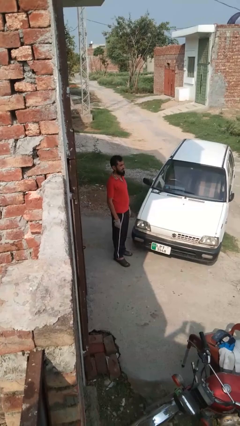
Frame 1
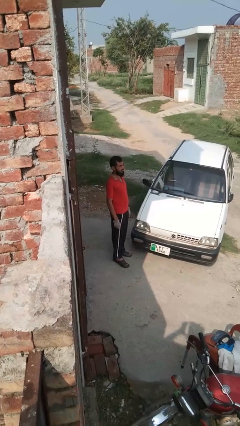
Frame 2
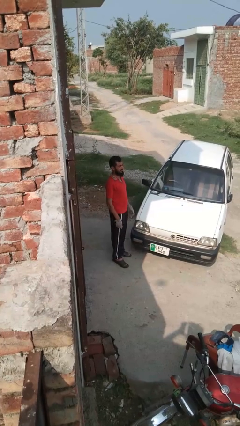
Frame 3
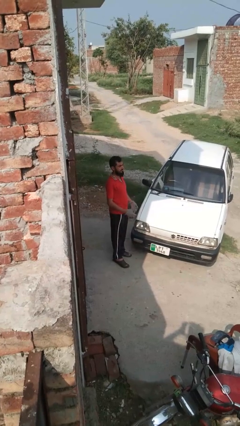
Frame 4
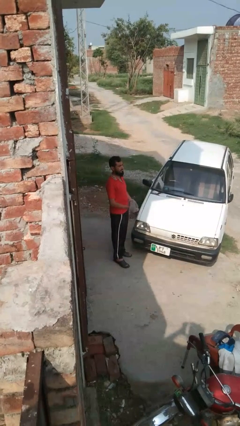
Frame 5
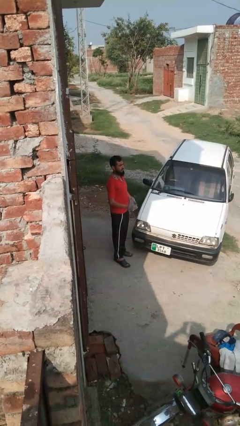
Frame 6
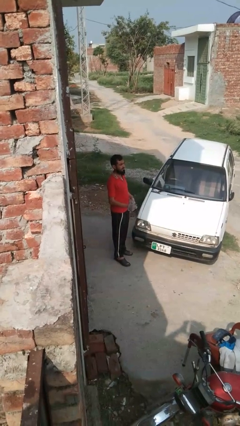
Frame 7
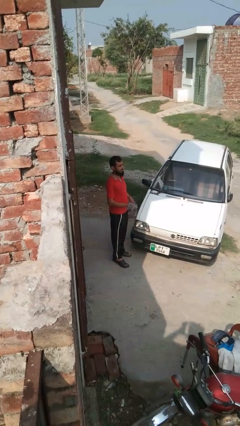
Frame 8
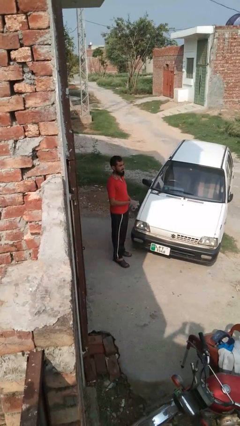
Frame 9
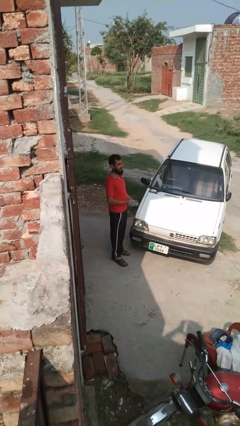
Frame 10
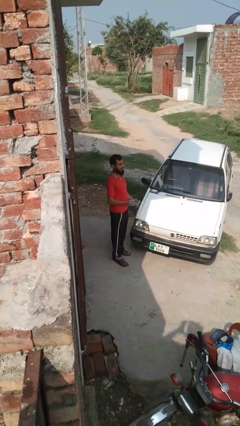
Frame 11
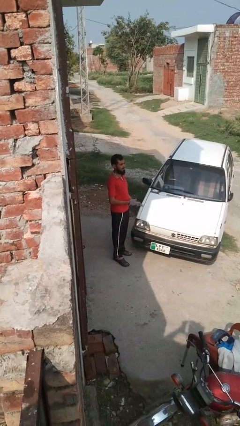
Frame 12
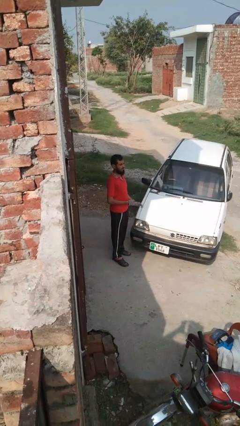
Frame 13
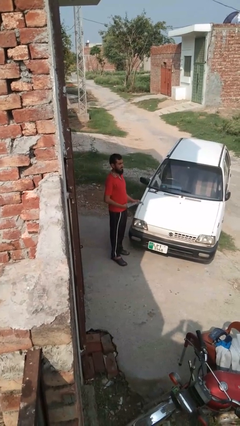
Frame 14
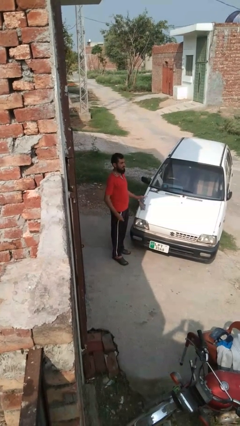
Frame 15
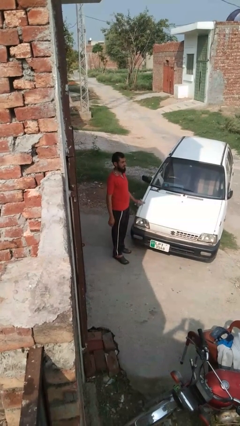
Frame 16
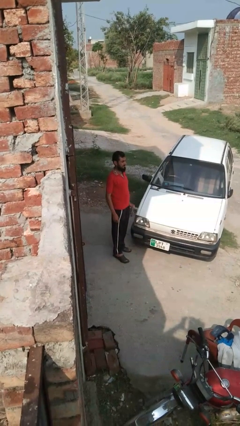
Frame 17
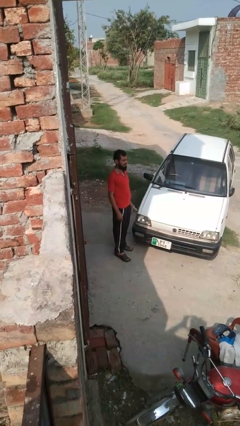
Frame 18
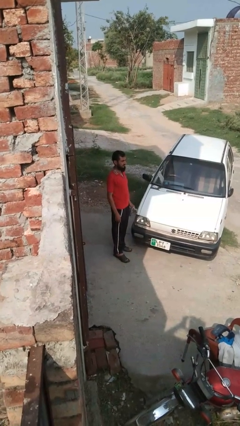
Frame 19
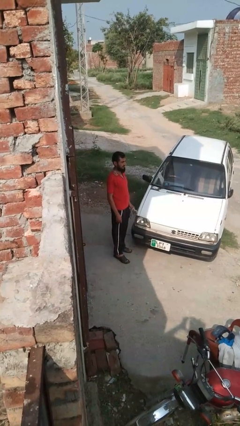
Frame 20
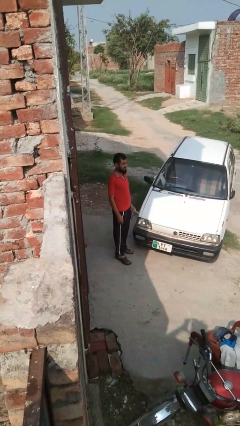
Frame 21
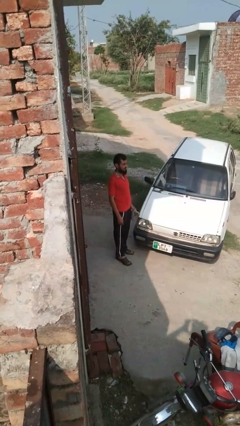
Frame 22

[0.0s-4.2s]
person takes off gloves

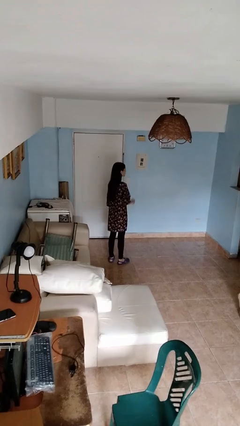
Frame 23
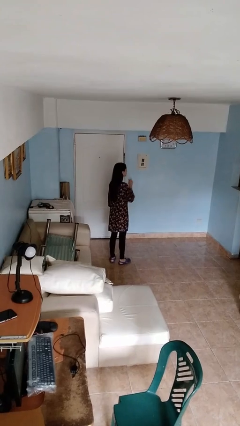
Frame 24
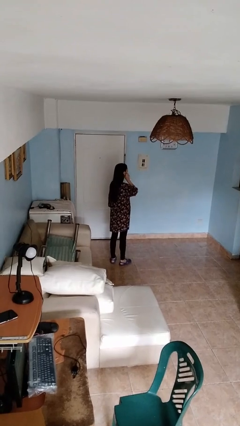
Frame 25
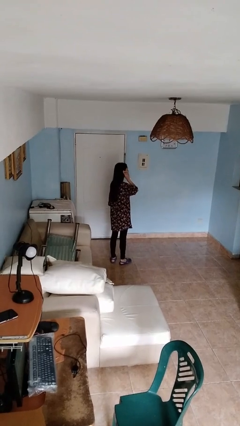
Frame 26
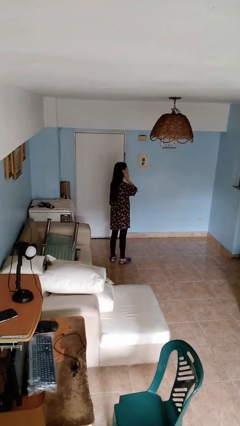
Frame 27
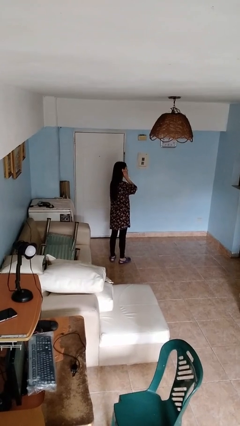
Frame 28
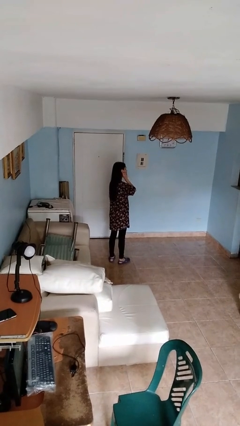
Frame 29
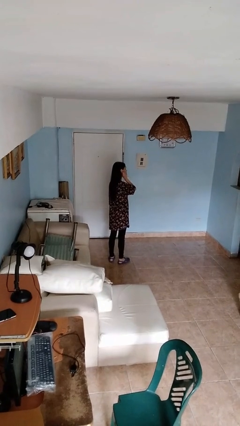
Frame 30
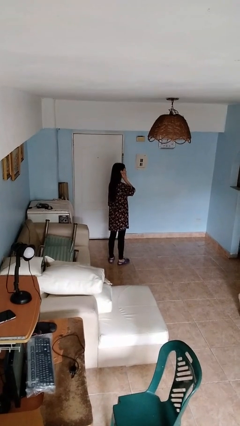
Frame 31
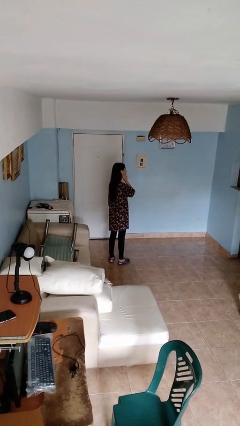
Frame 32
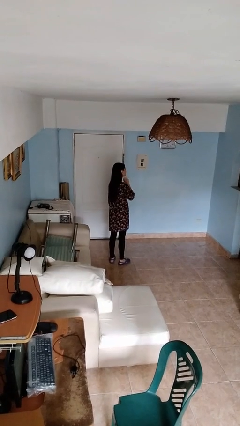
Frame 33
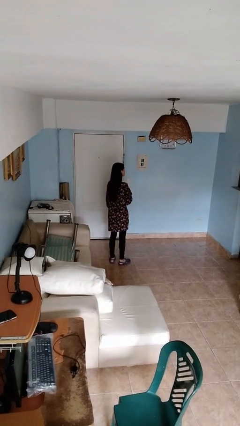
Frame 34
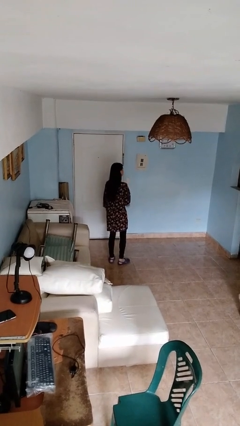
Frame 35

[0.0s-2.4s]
person touches earlobe

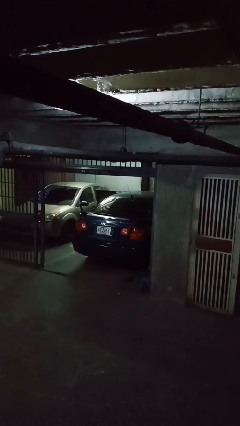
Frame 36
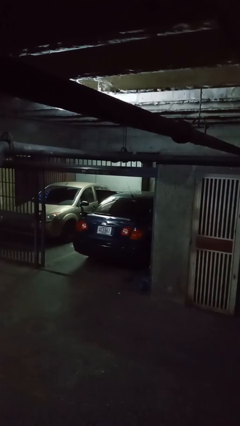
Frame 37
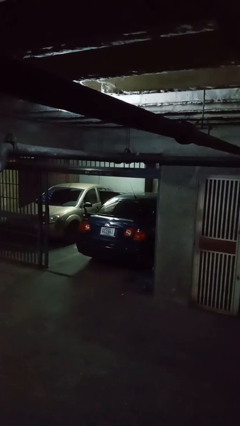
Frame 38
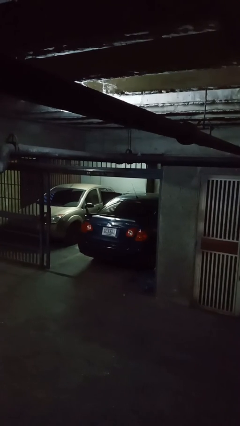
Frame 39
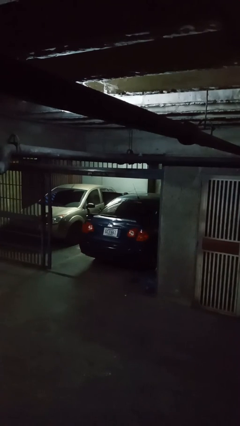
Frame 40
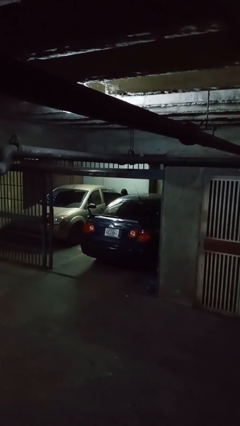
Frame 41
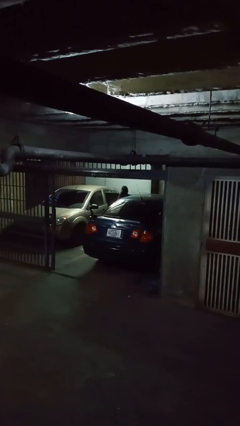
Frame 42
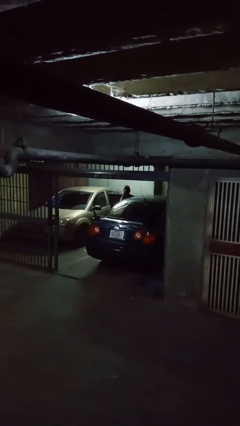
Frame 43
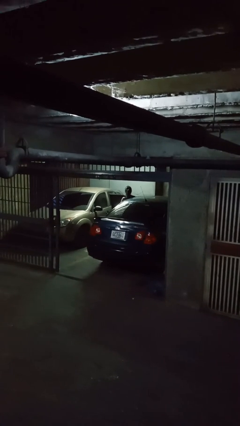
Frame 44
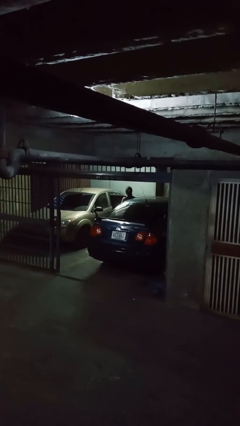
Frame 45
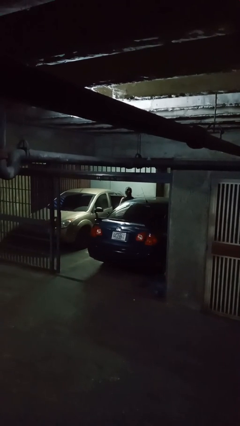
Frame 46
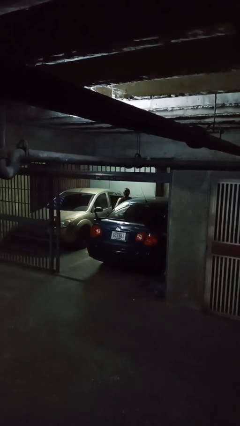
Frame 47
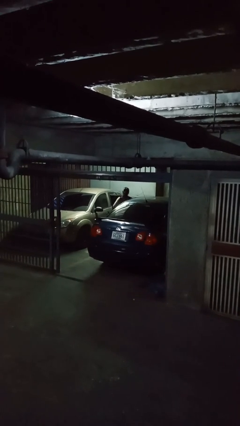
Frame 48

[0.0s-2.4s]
person exits car

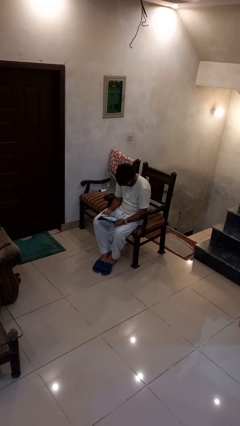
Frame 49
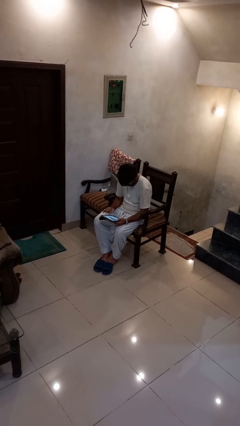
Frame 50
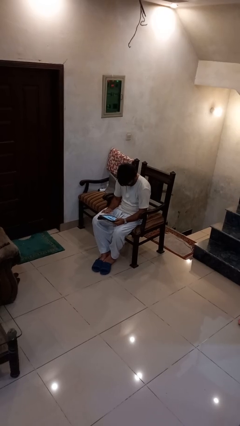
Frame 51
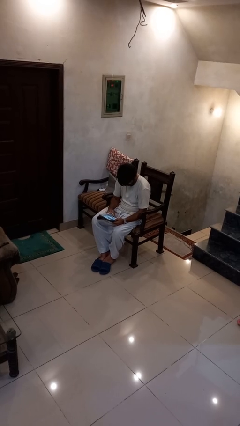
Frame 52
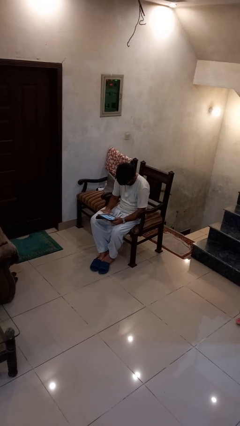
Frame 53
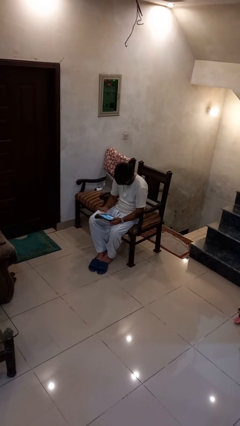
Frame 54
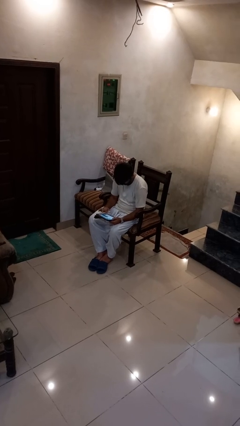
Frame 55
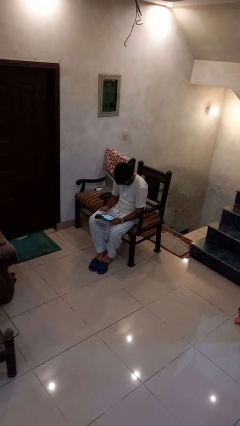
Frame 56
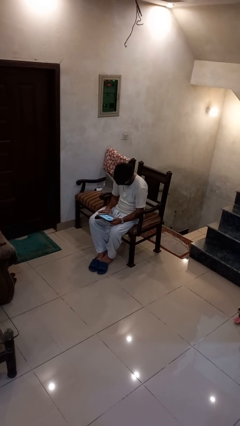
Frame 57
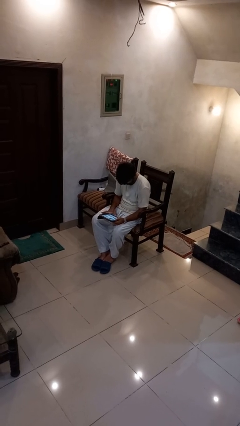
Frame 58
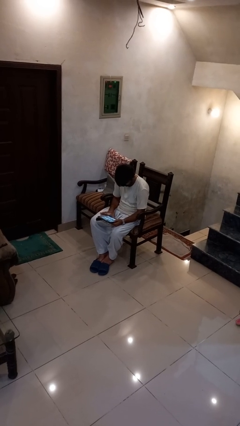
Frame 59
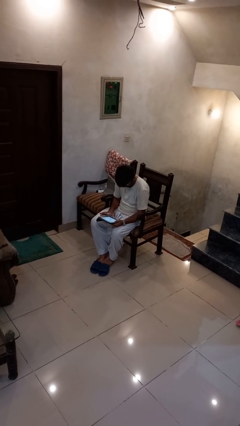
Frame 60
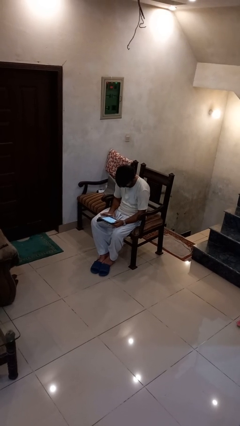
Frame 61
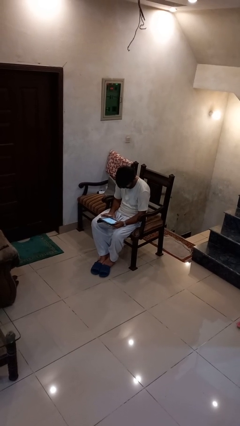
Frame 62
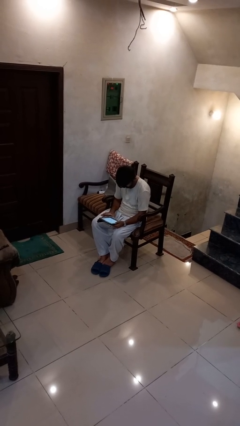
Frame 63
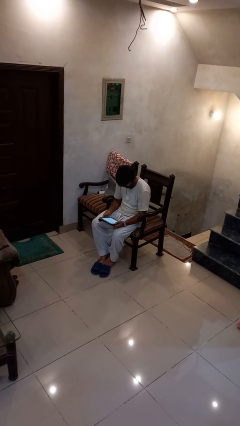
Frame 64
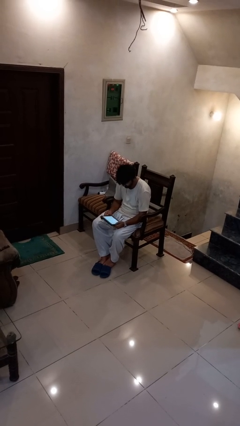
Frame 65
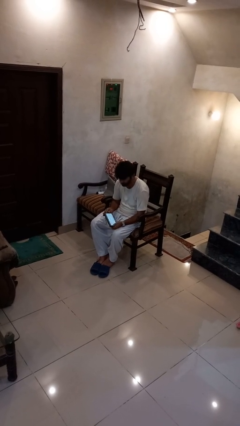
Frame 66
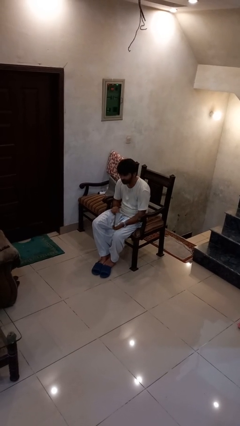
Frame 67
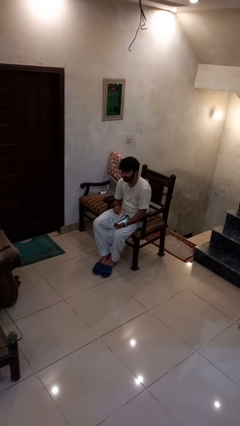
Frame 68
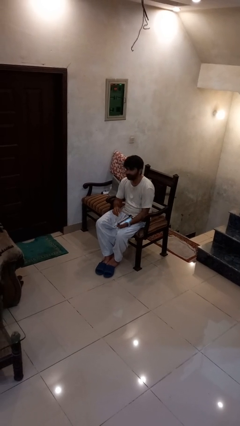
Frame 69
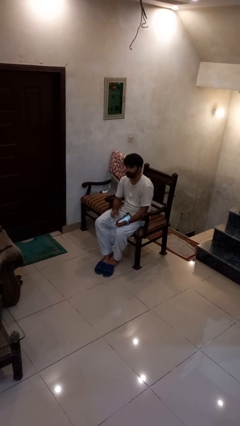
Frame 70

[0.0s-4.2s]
person interacts with tablet

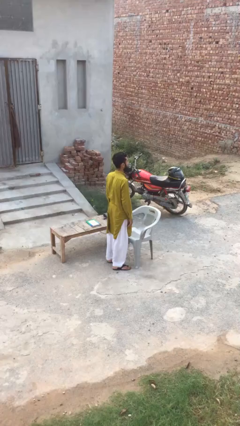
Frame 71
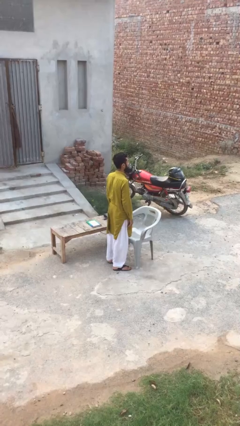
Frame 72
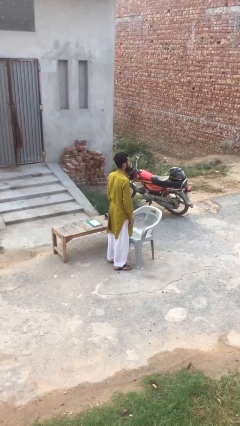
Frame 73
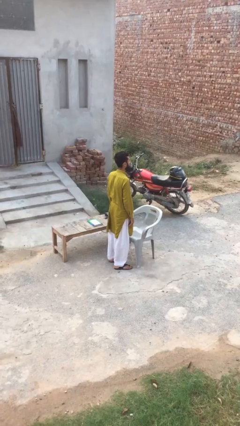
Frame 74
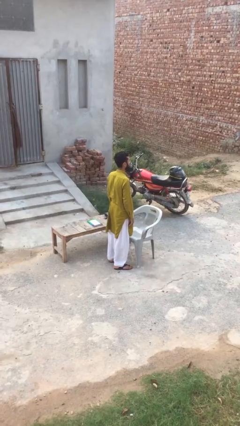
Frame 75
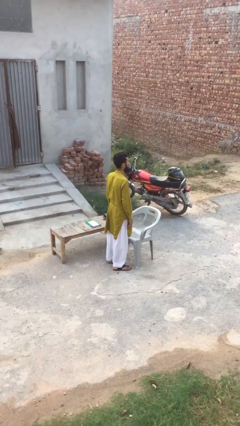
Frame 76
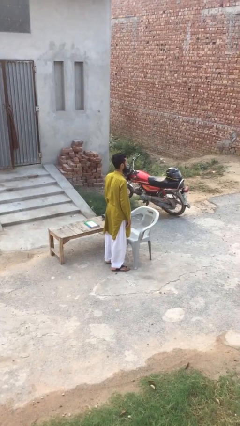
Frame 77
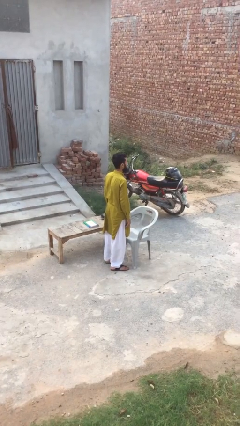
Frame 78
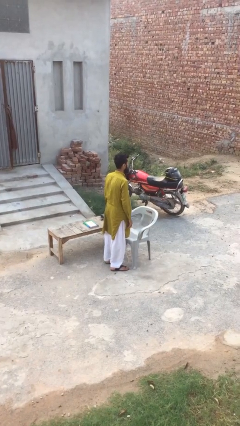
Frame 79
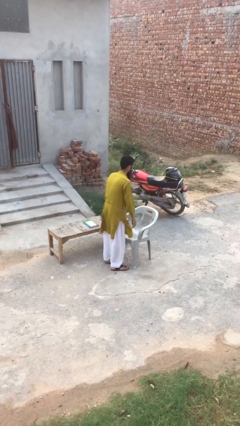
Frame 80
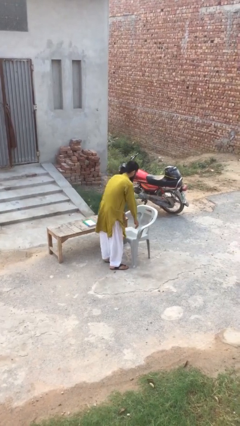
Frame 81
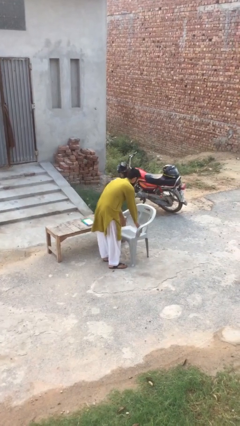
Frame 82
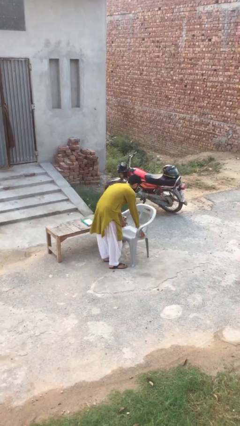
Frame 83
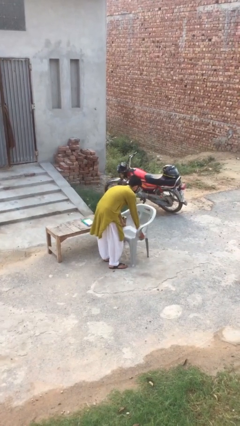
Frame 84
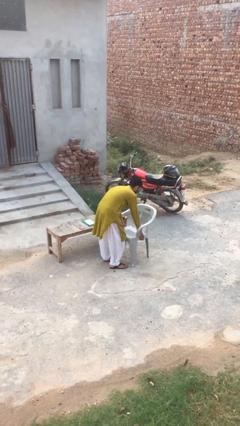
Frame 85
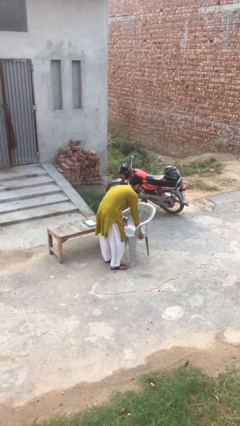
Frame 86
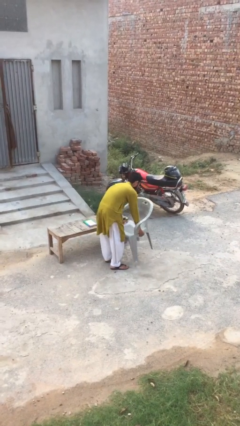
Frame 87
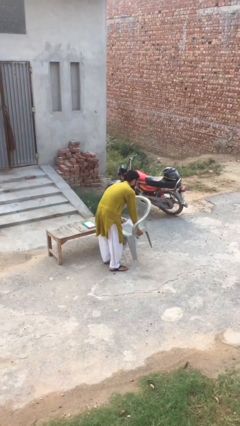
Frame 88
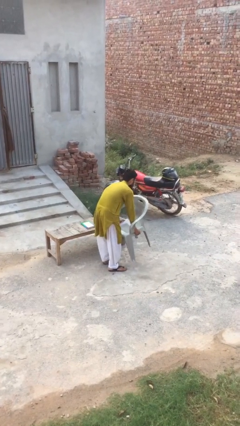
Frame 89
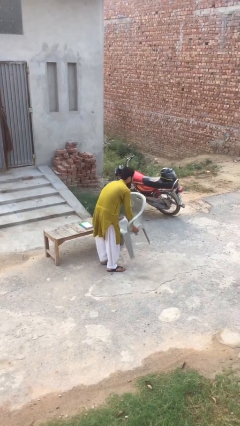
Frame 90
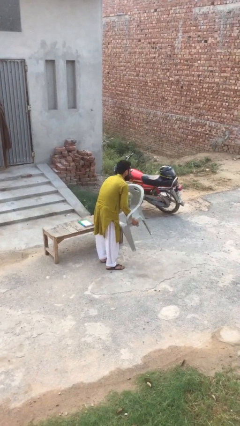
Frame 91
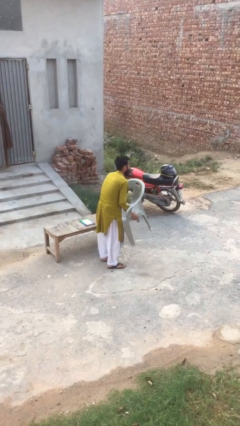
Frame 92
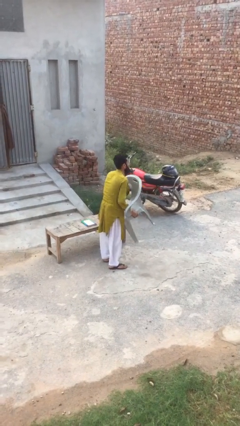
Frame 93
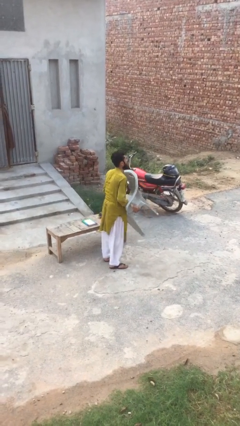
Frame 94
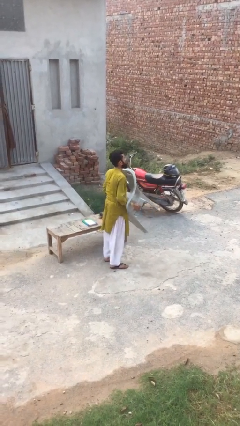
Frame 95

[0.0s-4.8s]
person picks up object from floor
